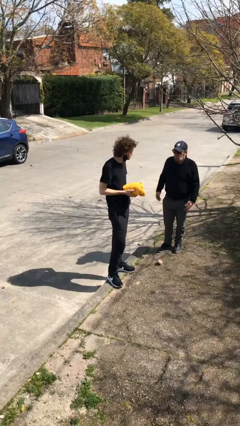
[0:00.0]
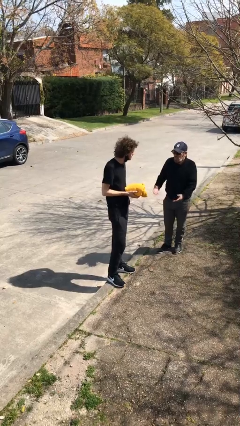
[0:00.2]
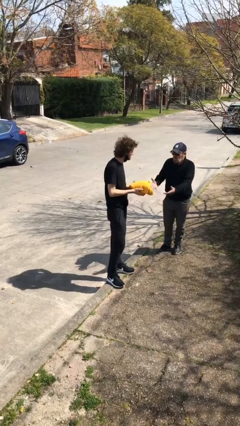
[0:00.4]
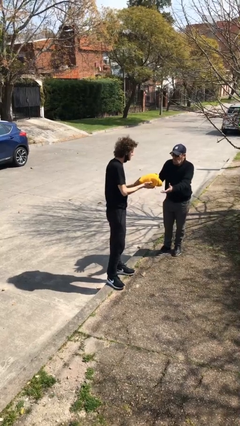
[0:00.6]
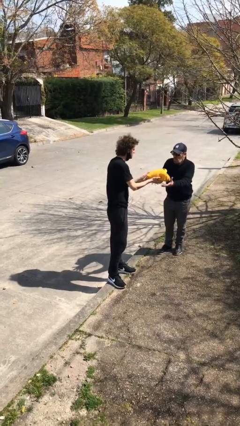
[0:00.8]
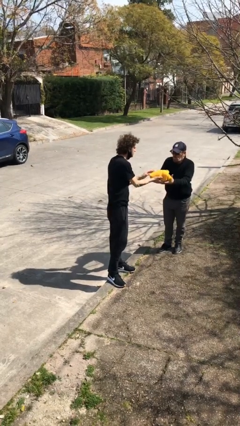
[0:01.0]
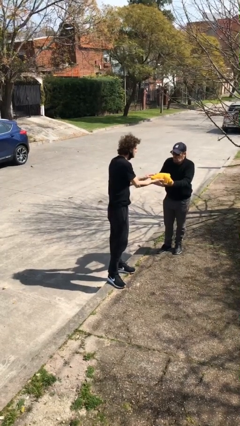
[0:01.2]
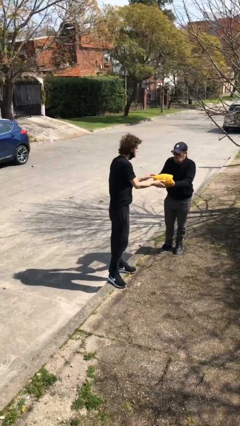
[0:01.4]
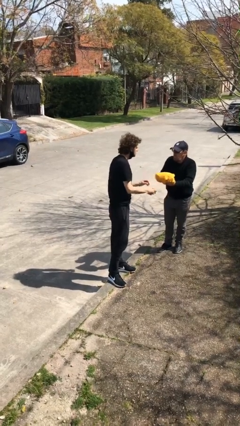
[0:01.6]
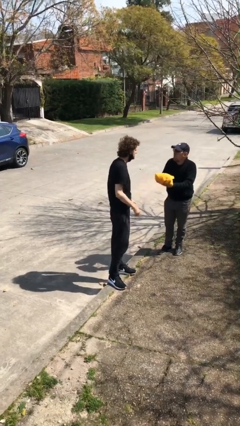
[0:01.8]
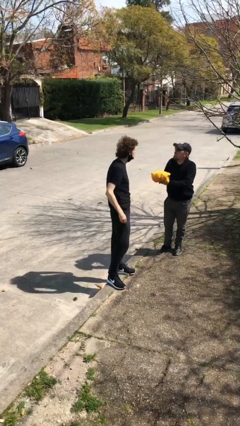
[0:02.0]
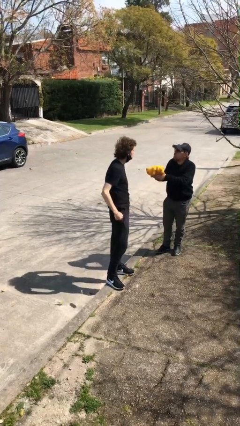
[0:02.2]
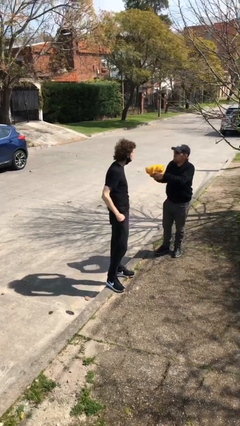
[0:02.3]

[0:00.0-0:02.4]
person transfers object to person

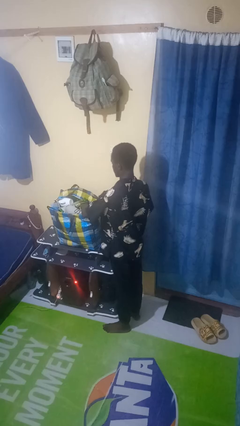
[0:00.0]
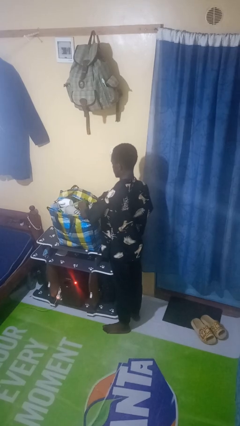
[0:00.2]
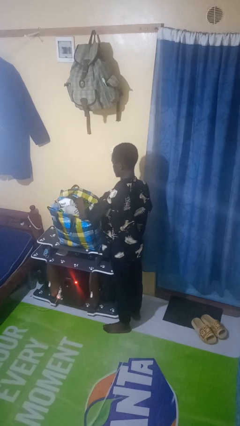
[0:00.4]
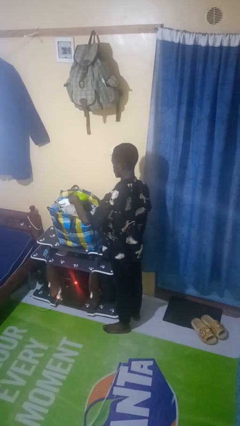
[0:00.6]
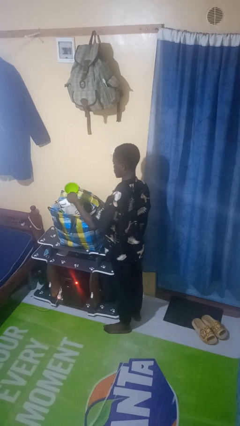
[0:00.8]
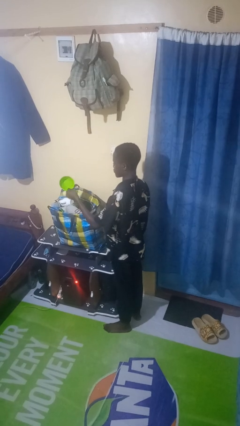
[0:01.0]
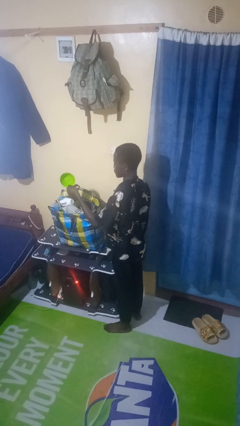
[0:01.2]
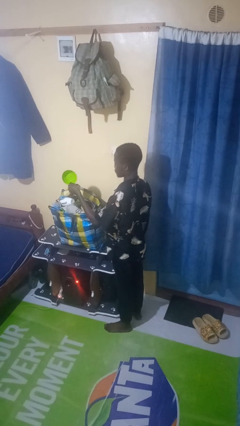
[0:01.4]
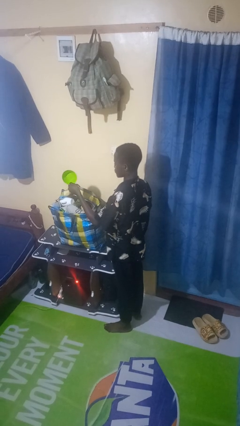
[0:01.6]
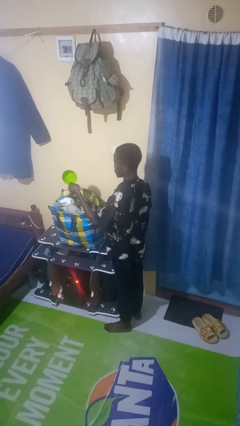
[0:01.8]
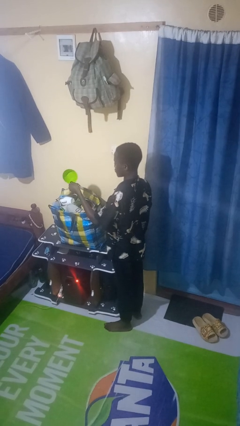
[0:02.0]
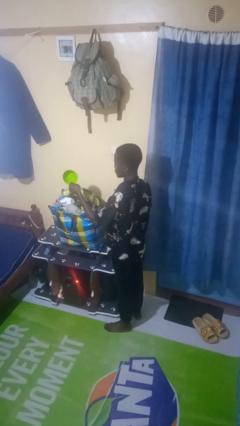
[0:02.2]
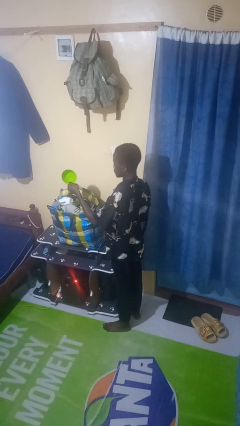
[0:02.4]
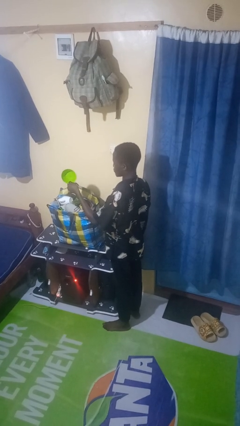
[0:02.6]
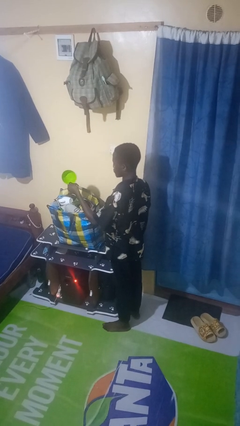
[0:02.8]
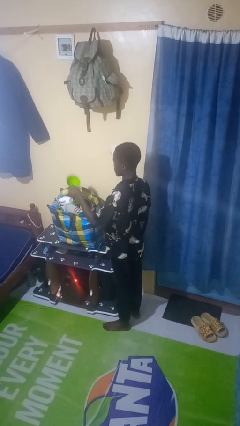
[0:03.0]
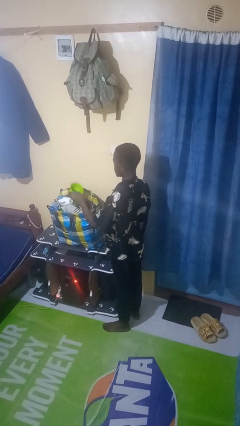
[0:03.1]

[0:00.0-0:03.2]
person takes object from bag

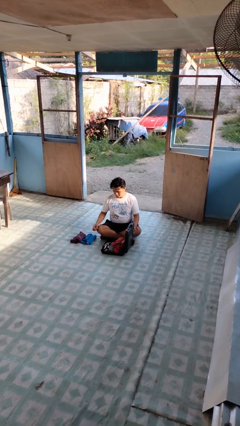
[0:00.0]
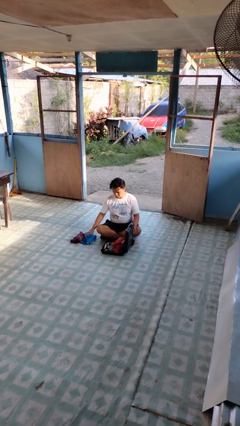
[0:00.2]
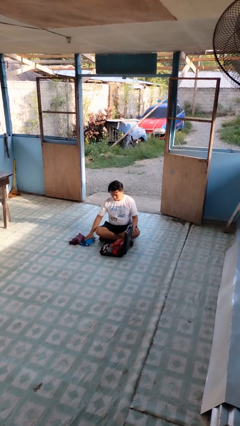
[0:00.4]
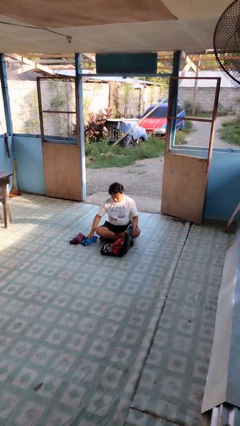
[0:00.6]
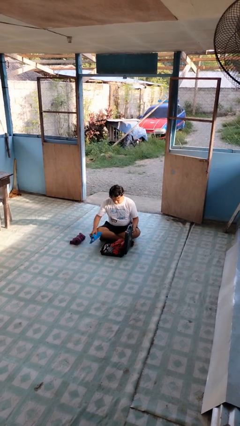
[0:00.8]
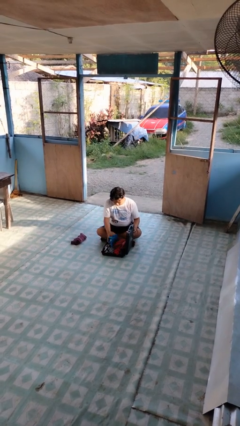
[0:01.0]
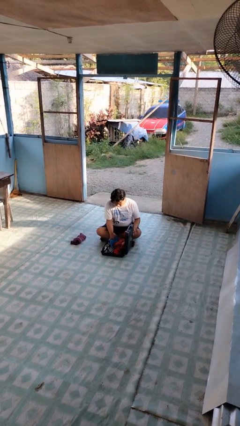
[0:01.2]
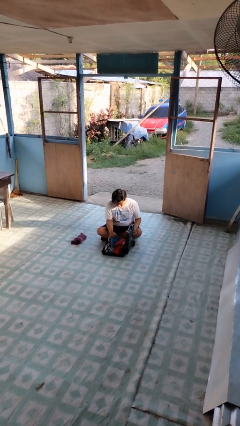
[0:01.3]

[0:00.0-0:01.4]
person loads clothes into suitcase

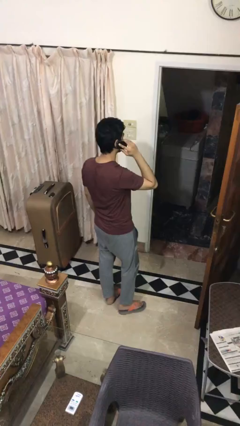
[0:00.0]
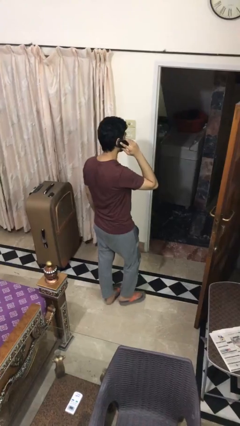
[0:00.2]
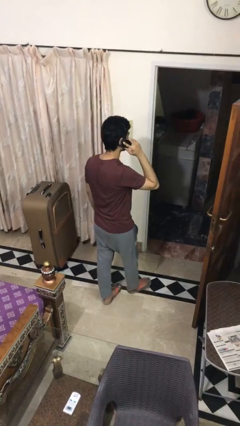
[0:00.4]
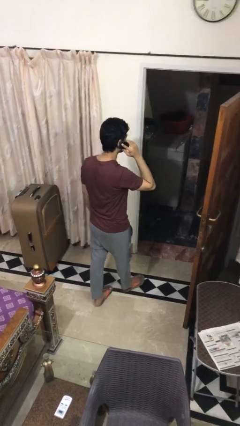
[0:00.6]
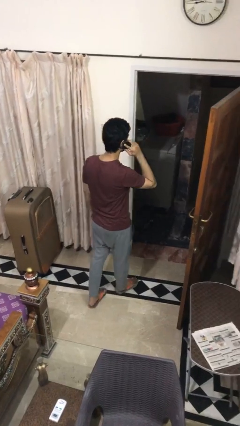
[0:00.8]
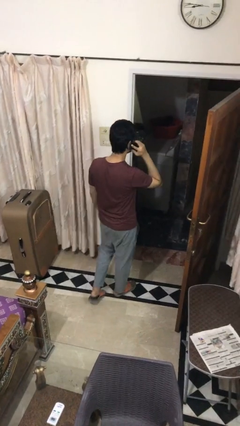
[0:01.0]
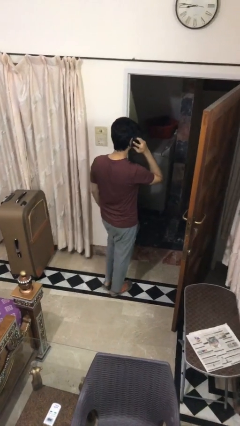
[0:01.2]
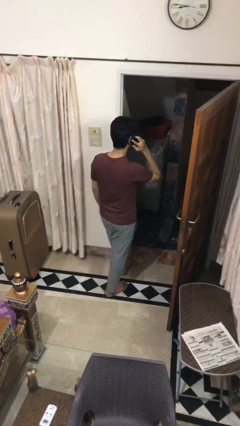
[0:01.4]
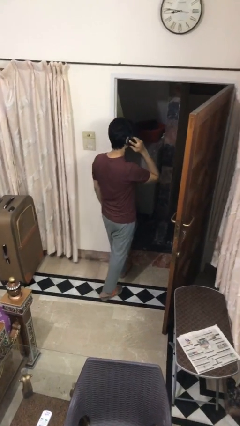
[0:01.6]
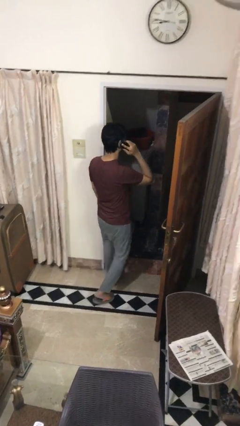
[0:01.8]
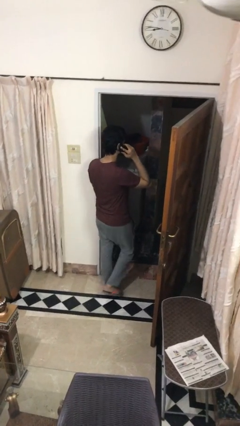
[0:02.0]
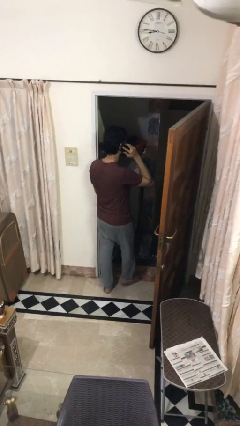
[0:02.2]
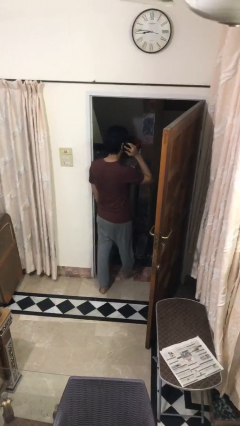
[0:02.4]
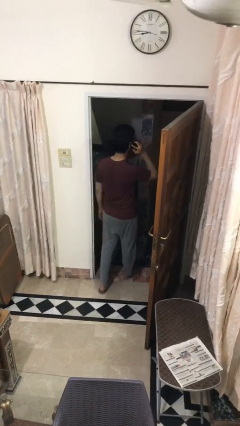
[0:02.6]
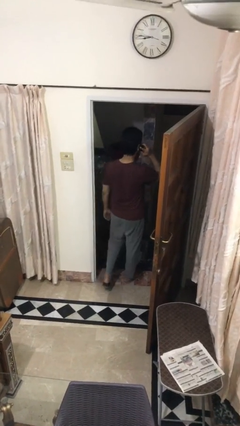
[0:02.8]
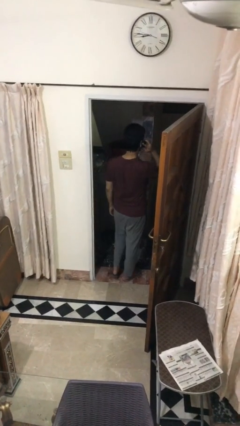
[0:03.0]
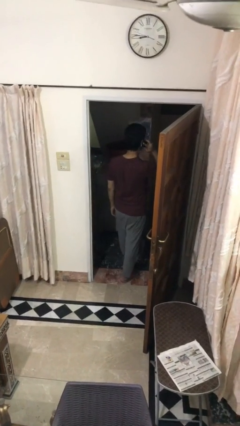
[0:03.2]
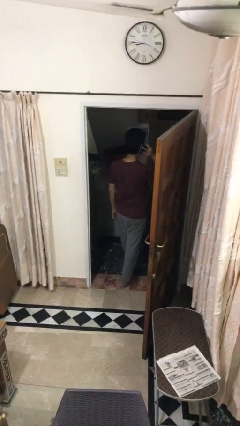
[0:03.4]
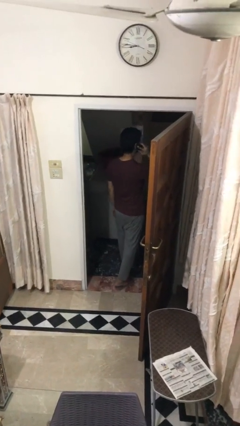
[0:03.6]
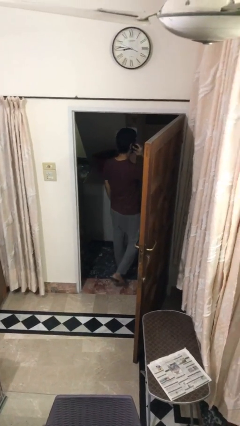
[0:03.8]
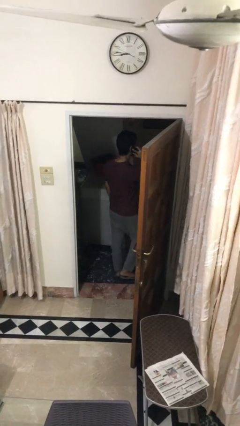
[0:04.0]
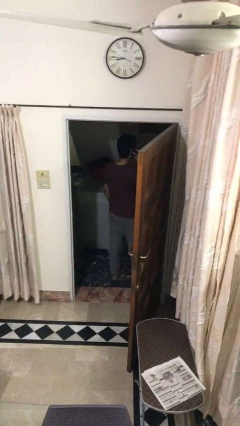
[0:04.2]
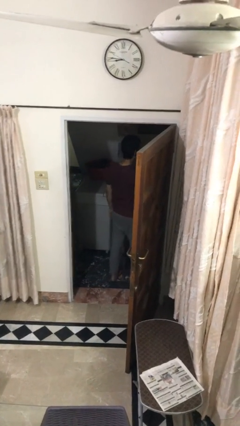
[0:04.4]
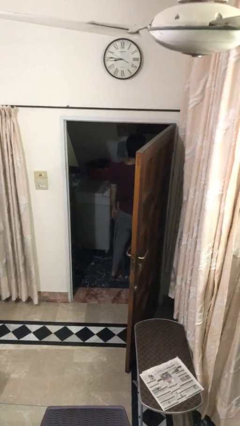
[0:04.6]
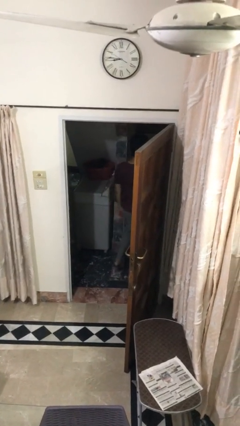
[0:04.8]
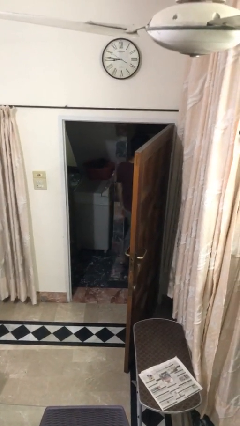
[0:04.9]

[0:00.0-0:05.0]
person exits scene through structure

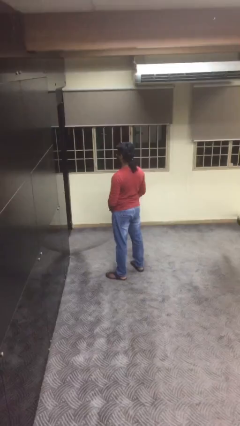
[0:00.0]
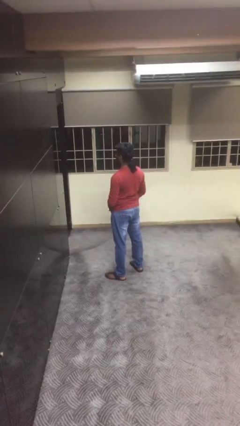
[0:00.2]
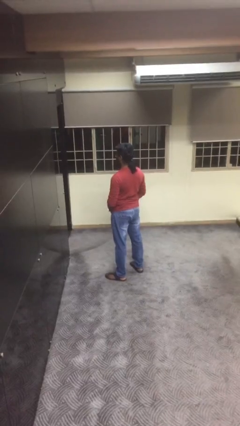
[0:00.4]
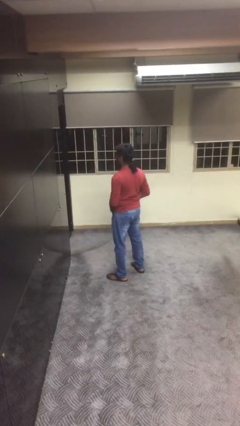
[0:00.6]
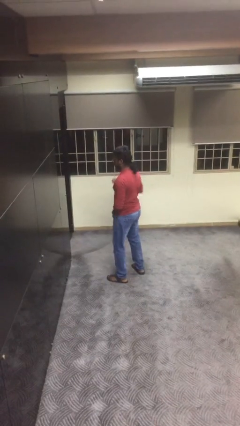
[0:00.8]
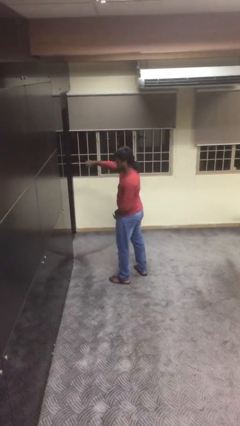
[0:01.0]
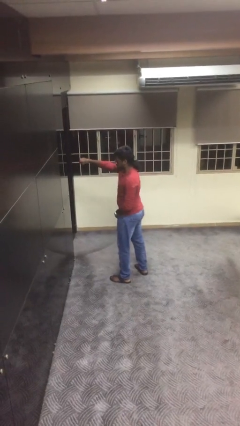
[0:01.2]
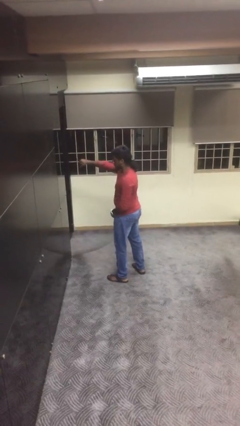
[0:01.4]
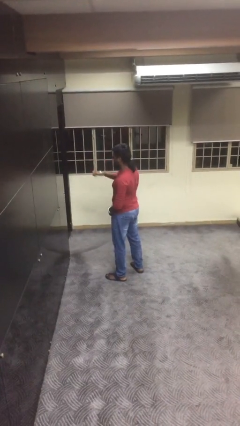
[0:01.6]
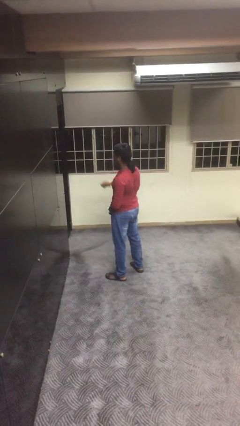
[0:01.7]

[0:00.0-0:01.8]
person punches

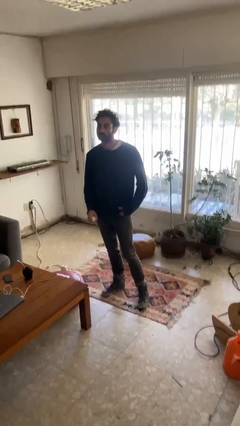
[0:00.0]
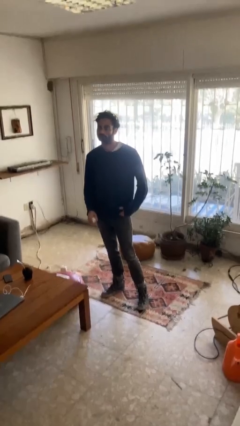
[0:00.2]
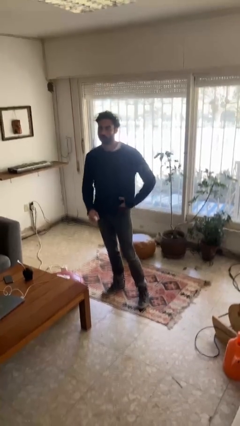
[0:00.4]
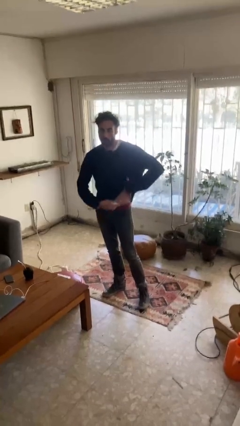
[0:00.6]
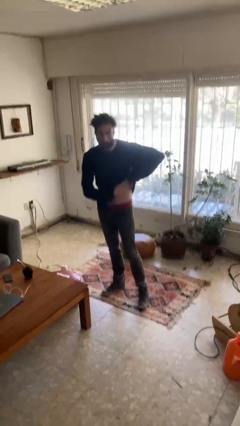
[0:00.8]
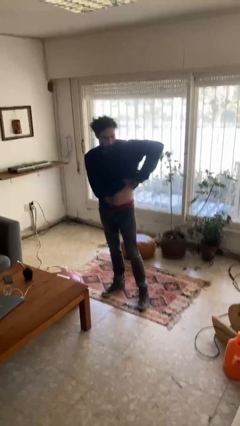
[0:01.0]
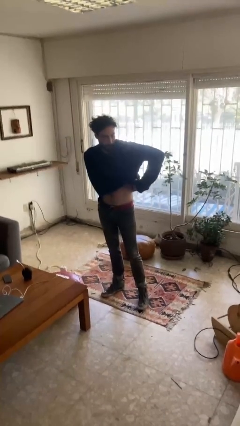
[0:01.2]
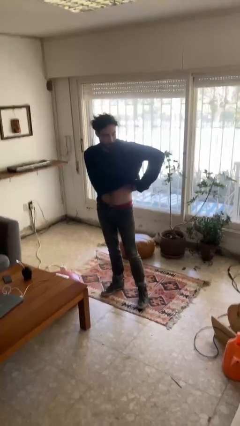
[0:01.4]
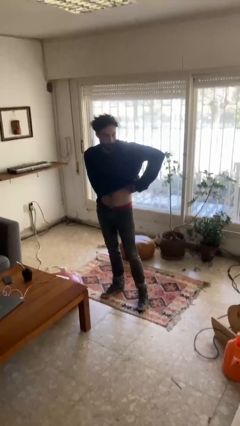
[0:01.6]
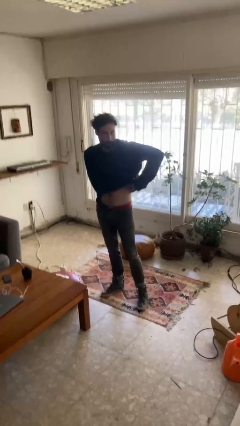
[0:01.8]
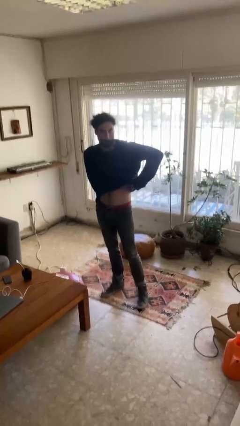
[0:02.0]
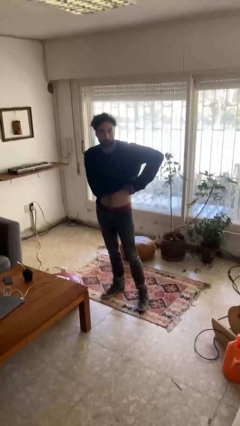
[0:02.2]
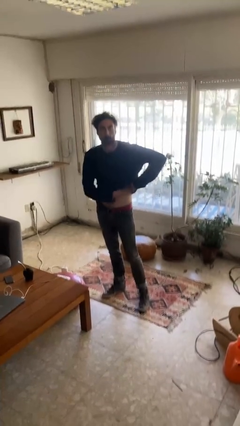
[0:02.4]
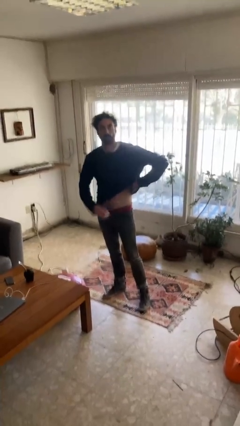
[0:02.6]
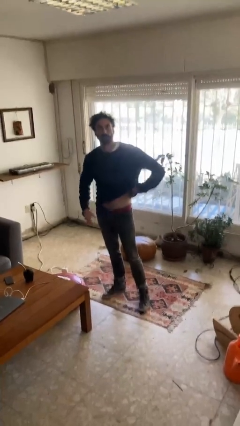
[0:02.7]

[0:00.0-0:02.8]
person applies deodorant

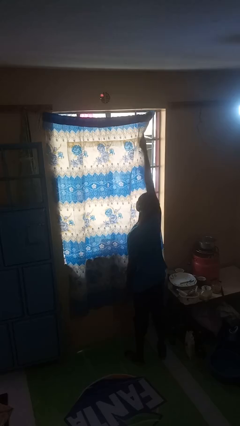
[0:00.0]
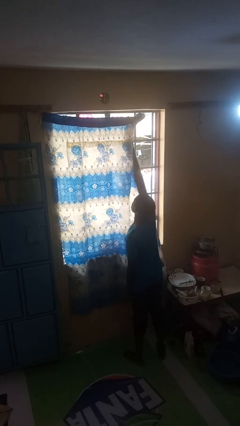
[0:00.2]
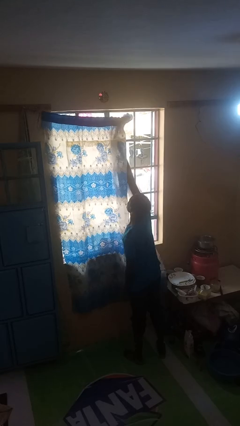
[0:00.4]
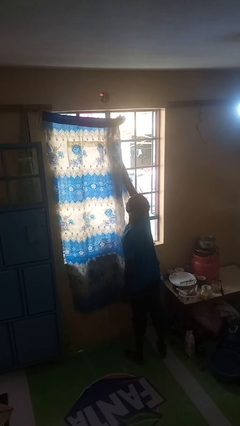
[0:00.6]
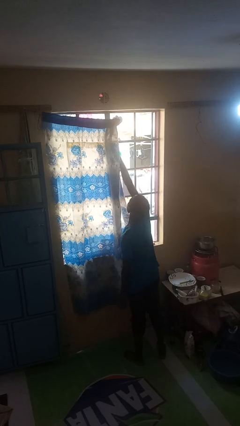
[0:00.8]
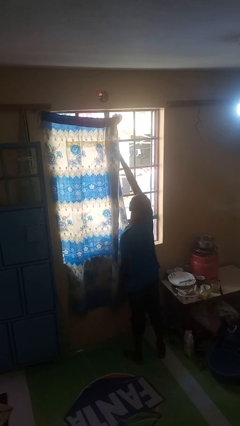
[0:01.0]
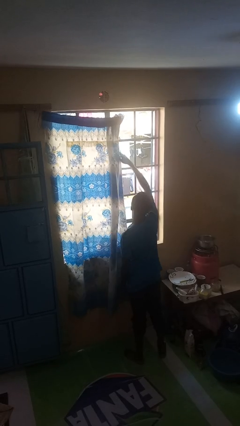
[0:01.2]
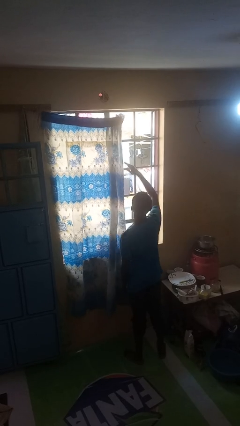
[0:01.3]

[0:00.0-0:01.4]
person opens curtains
